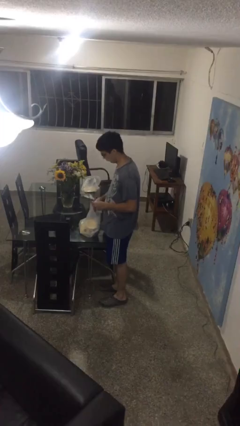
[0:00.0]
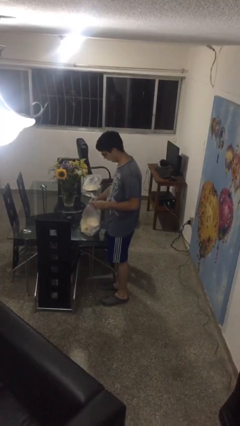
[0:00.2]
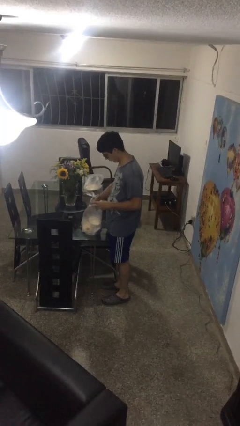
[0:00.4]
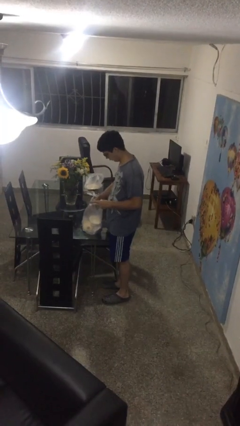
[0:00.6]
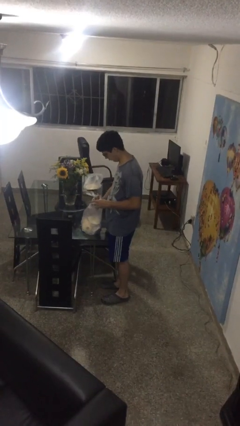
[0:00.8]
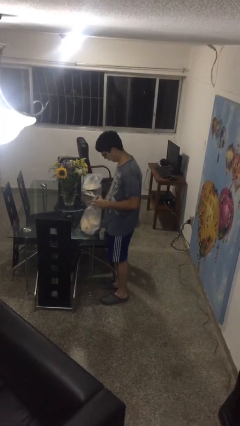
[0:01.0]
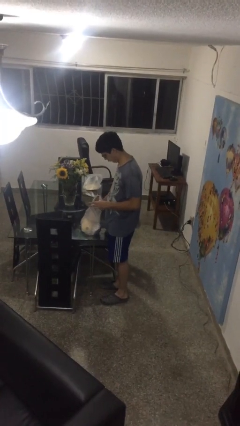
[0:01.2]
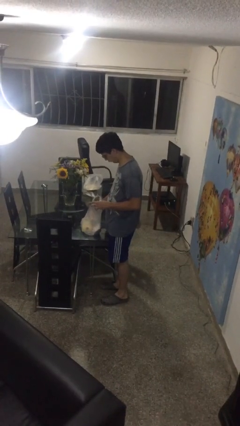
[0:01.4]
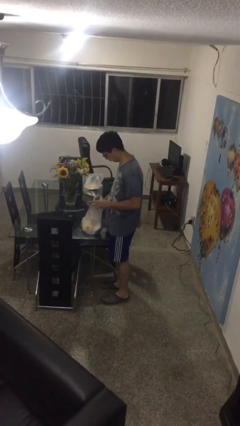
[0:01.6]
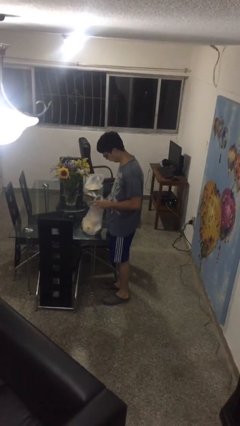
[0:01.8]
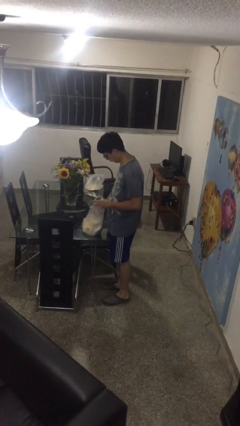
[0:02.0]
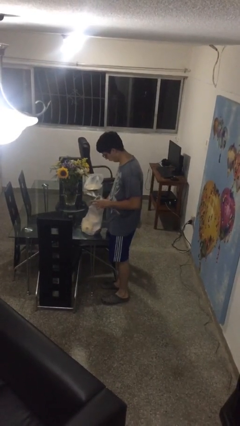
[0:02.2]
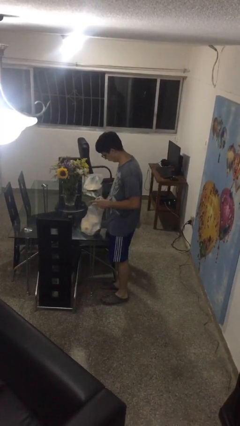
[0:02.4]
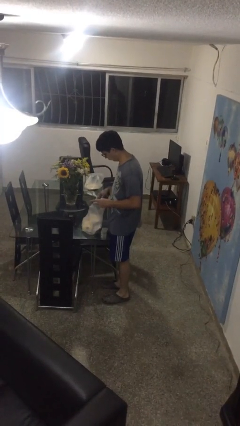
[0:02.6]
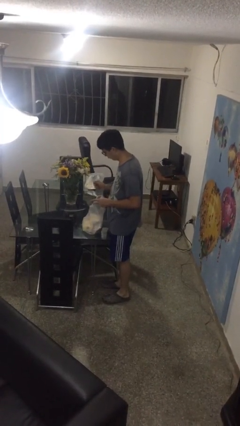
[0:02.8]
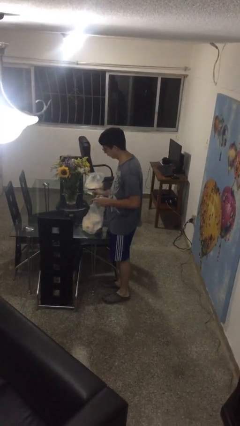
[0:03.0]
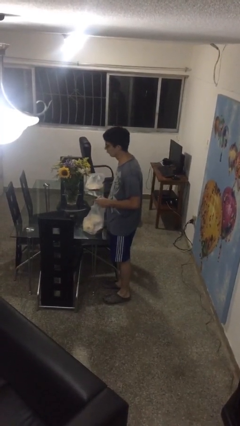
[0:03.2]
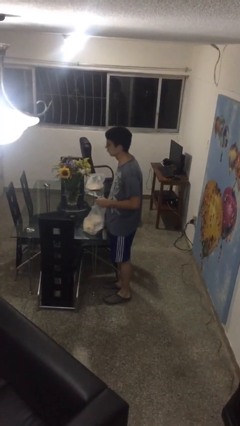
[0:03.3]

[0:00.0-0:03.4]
person searches in bag

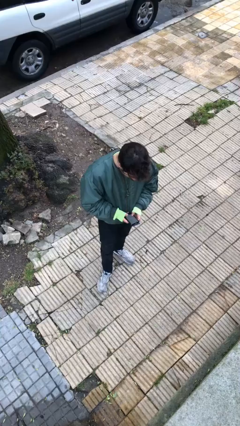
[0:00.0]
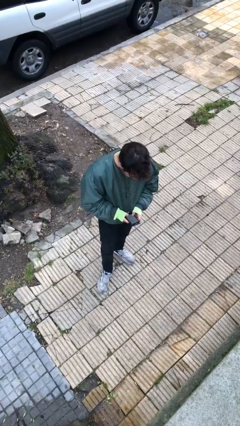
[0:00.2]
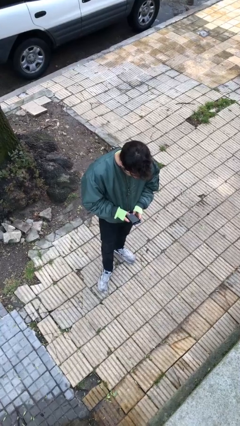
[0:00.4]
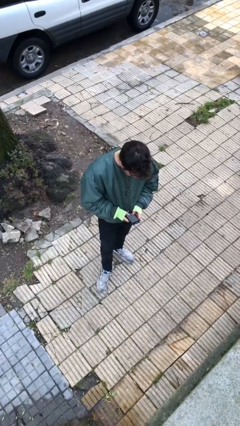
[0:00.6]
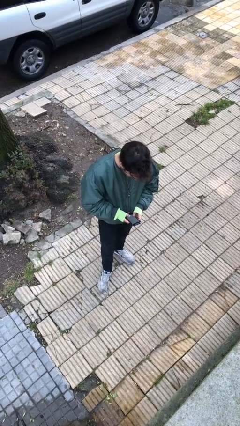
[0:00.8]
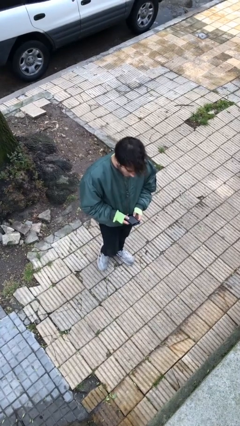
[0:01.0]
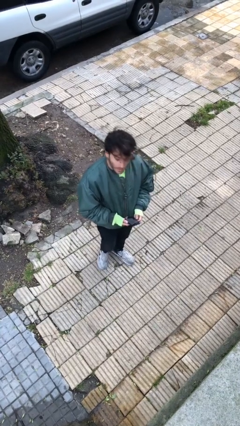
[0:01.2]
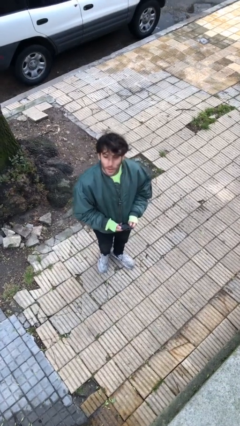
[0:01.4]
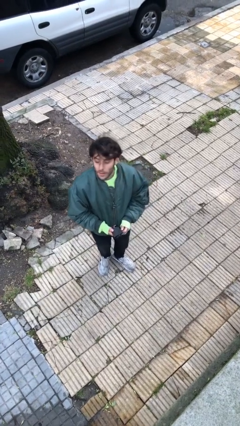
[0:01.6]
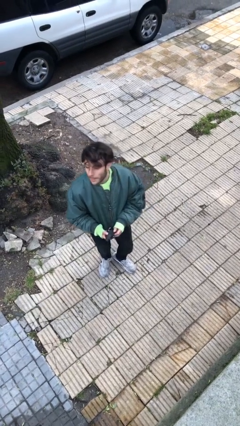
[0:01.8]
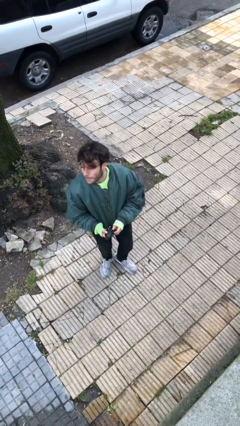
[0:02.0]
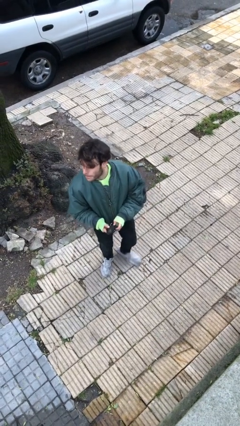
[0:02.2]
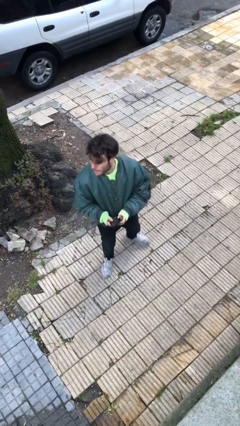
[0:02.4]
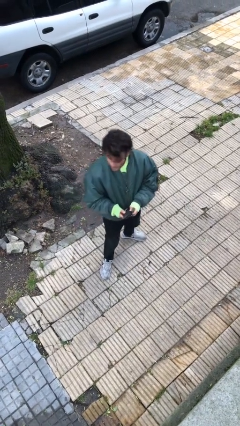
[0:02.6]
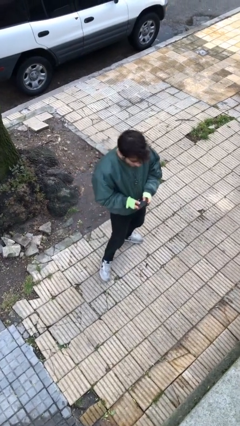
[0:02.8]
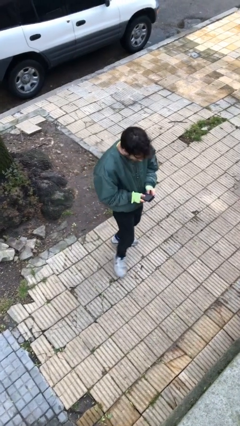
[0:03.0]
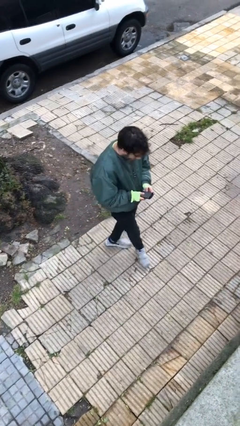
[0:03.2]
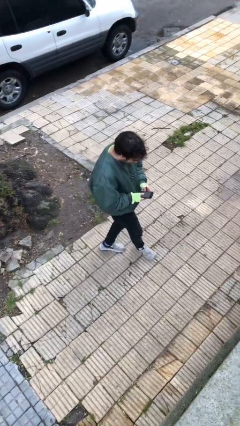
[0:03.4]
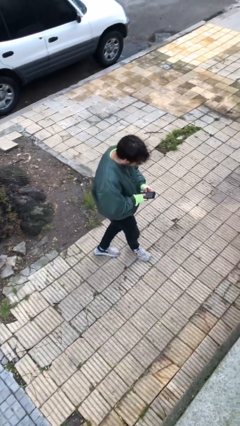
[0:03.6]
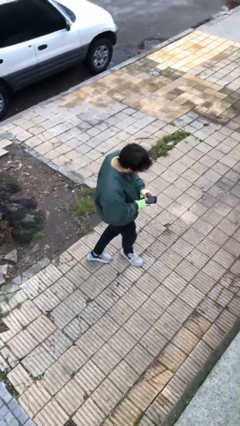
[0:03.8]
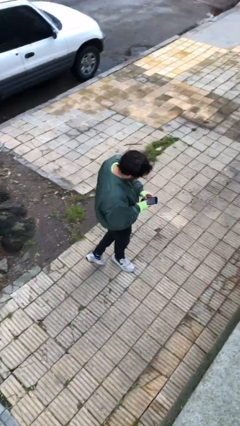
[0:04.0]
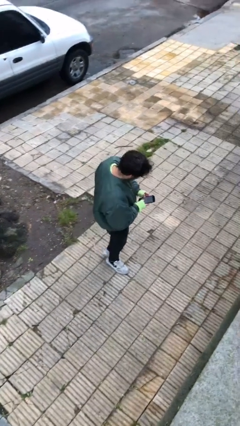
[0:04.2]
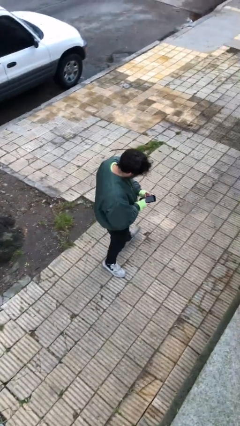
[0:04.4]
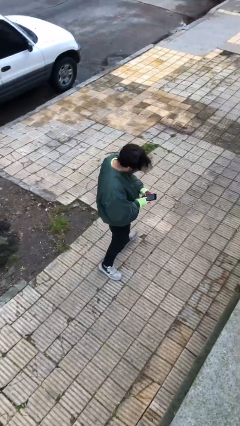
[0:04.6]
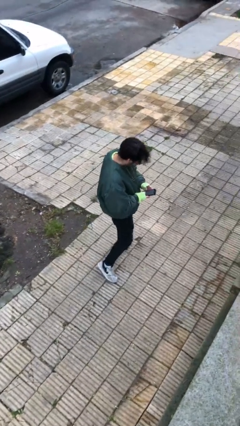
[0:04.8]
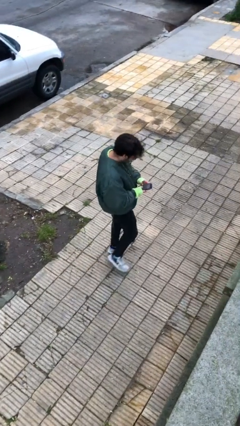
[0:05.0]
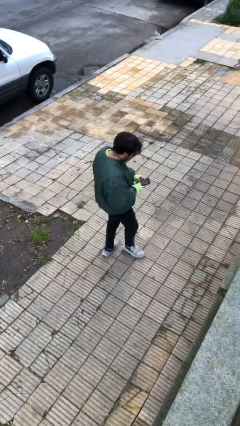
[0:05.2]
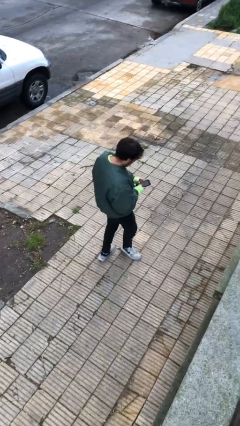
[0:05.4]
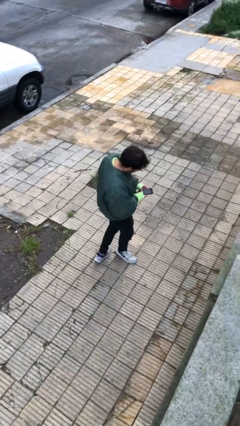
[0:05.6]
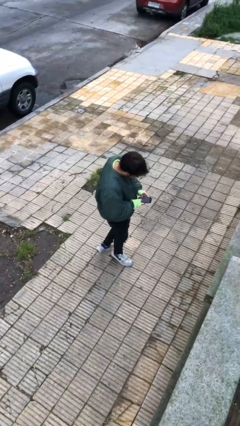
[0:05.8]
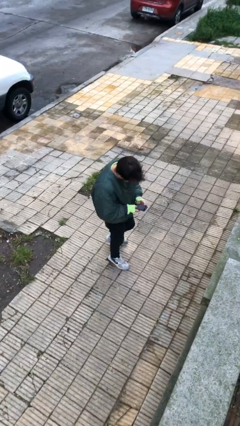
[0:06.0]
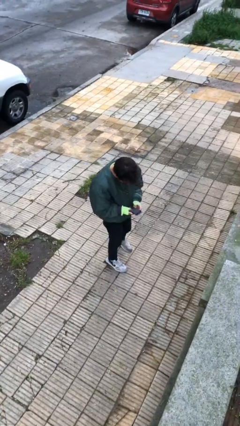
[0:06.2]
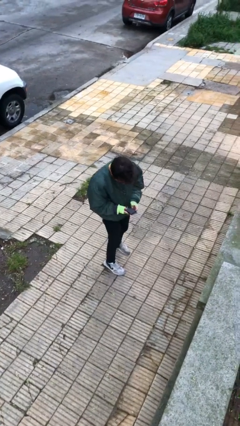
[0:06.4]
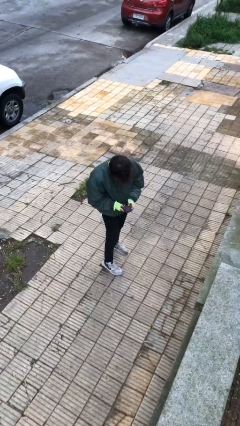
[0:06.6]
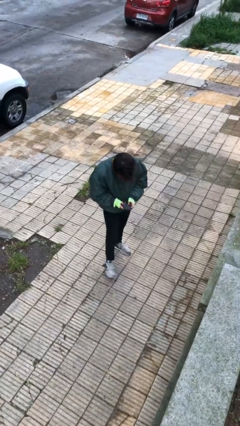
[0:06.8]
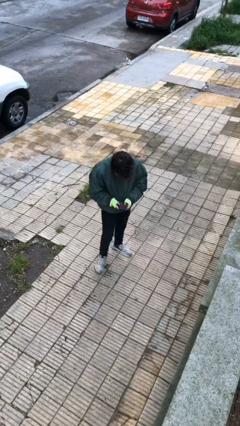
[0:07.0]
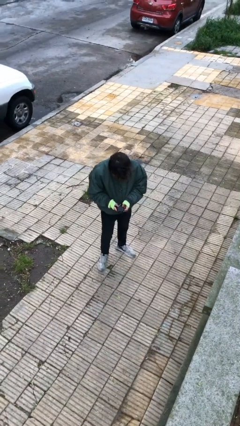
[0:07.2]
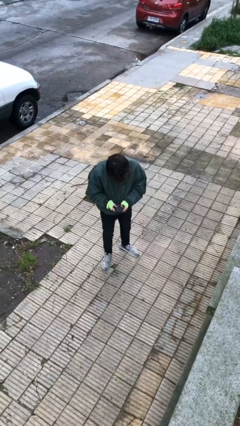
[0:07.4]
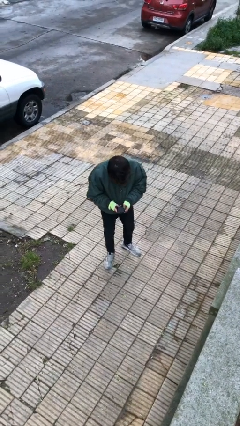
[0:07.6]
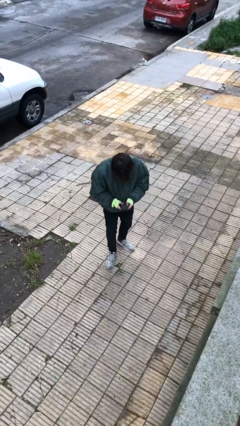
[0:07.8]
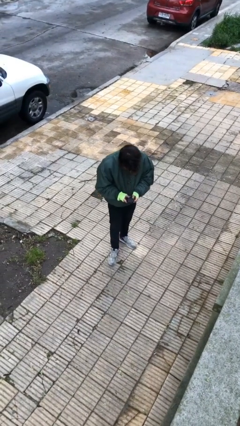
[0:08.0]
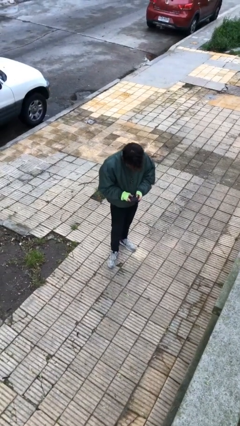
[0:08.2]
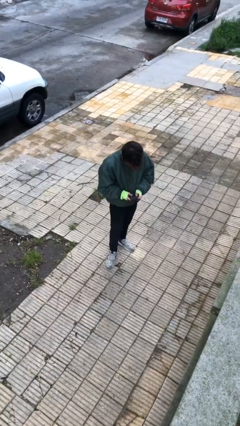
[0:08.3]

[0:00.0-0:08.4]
person texts on phone

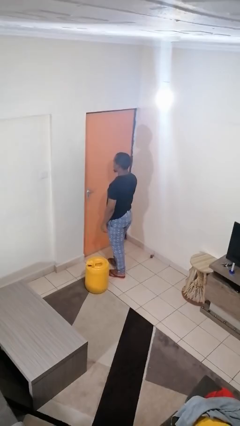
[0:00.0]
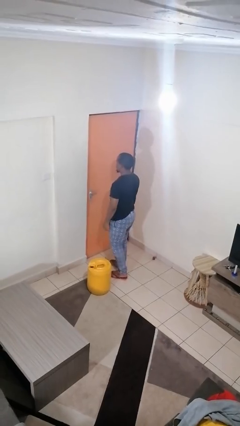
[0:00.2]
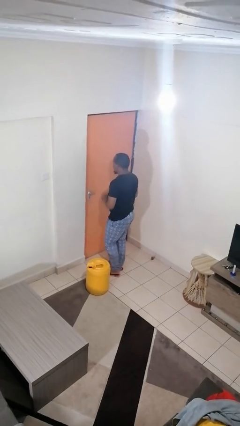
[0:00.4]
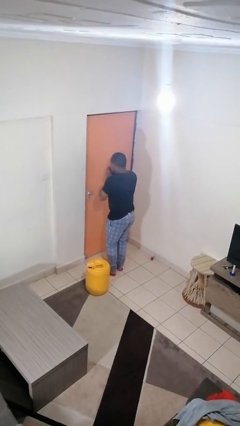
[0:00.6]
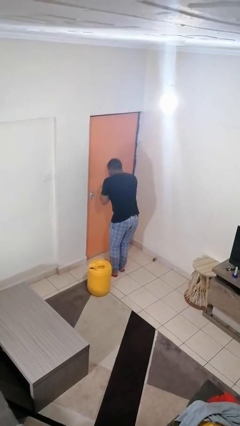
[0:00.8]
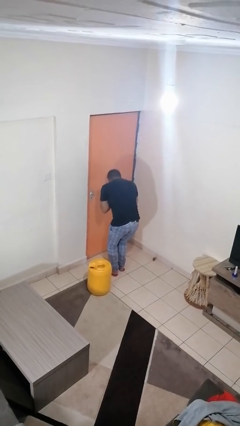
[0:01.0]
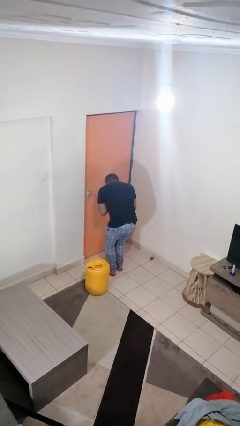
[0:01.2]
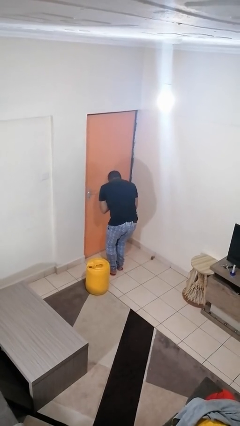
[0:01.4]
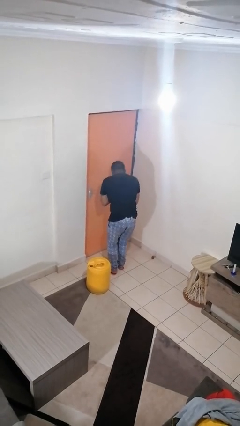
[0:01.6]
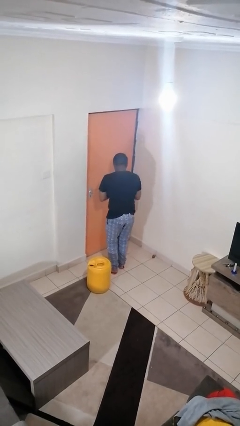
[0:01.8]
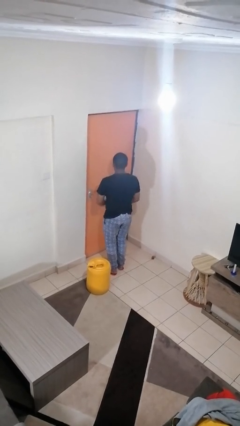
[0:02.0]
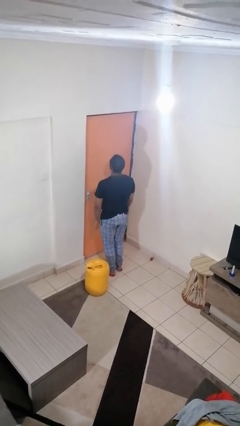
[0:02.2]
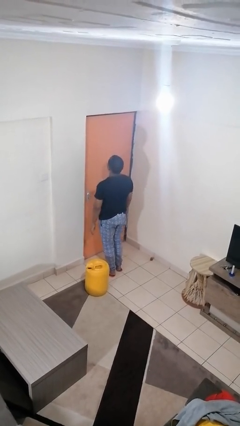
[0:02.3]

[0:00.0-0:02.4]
person sneezes into hand

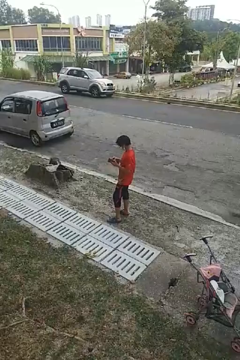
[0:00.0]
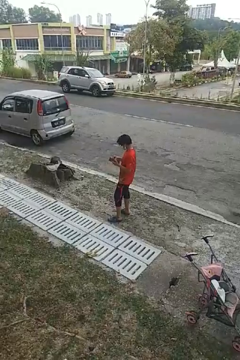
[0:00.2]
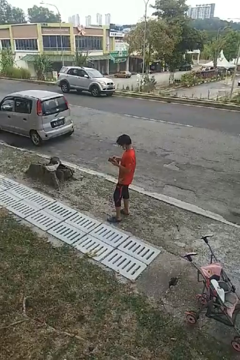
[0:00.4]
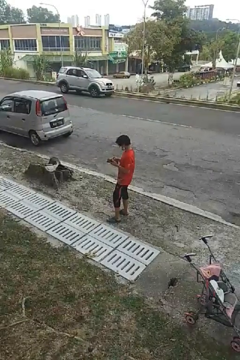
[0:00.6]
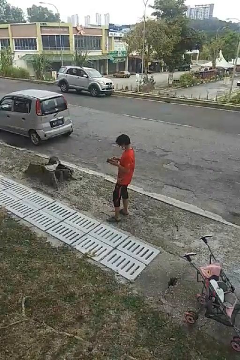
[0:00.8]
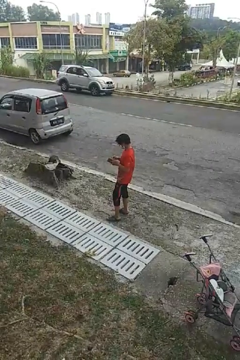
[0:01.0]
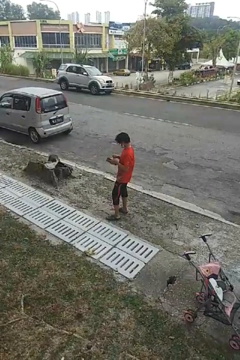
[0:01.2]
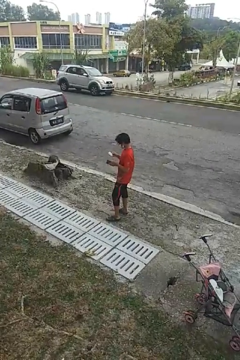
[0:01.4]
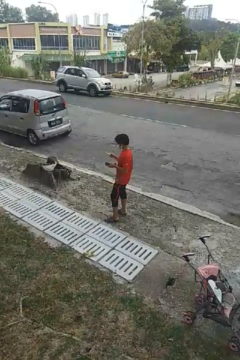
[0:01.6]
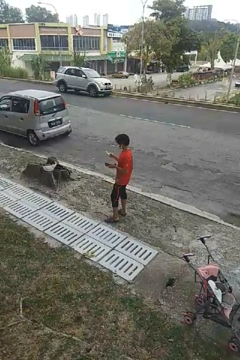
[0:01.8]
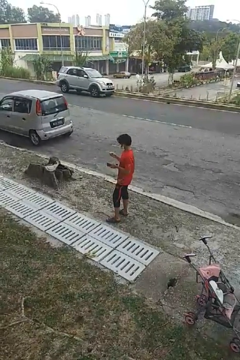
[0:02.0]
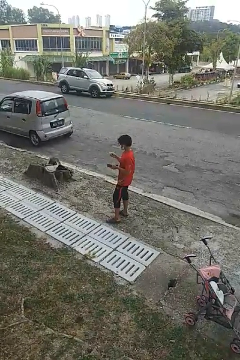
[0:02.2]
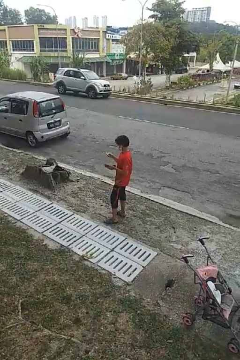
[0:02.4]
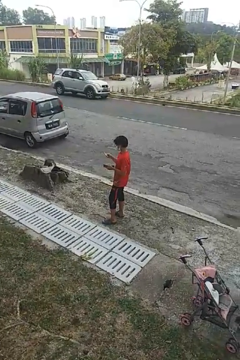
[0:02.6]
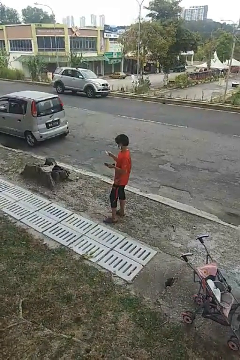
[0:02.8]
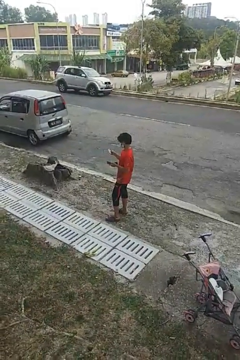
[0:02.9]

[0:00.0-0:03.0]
person takes object from purse

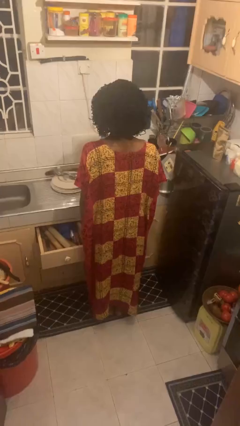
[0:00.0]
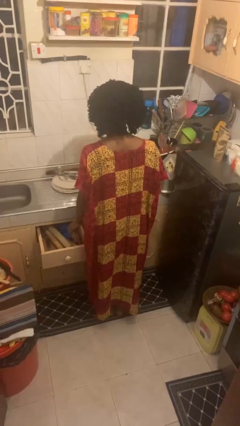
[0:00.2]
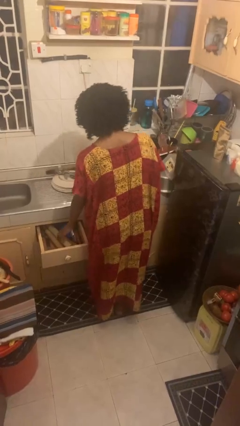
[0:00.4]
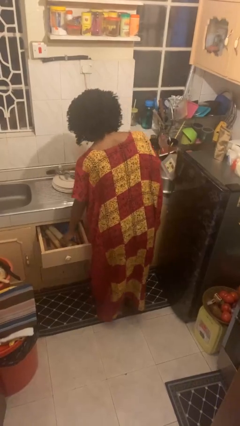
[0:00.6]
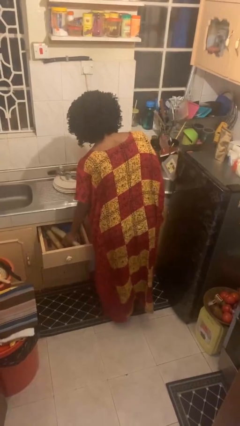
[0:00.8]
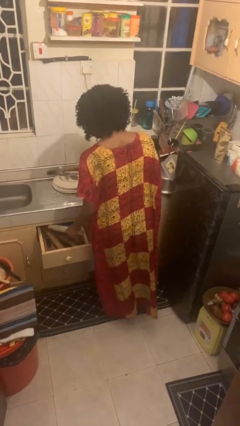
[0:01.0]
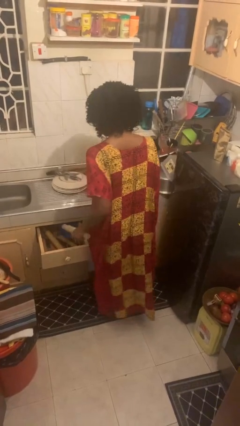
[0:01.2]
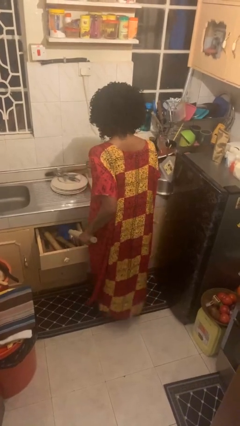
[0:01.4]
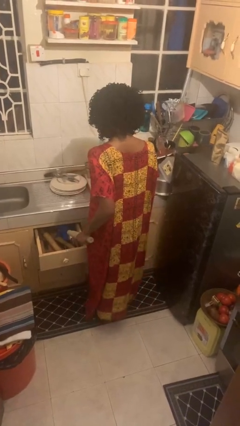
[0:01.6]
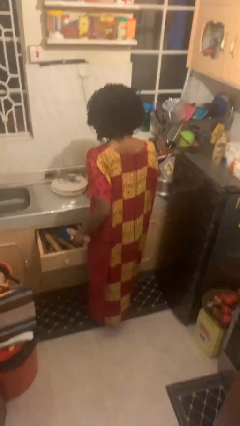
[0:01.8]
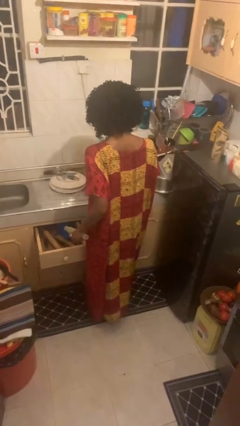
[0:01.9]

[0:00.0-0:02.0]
person takes object from kitchen drawer
